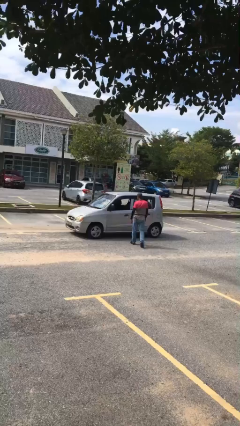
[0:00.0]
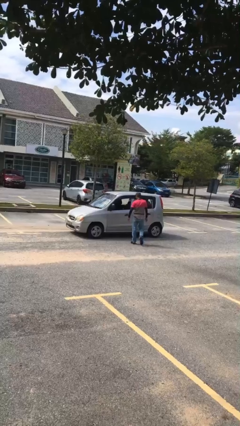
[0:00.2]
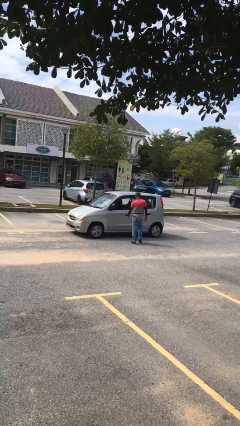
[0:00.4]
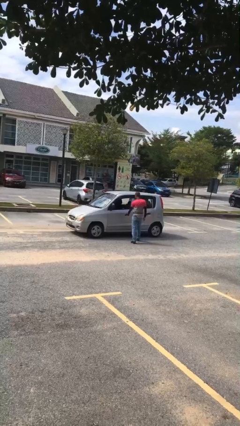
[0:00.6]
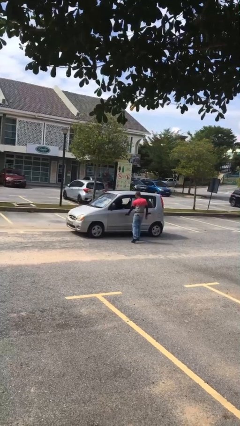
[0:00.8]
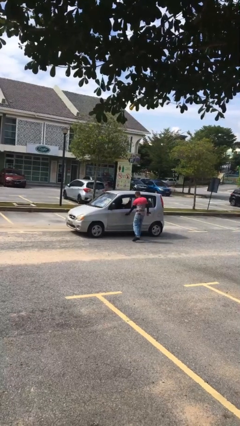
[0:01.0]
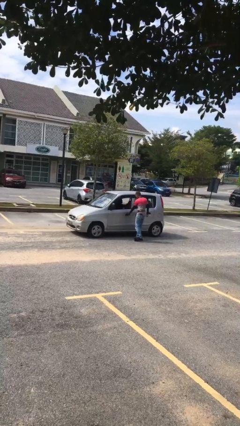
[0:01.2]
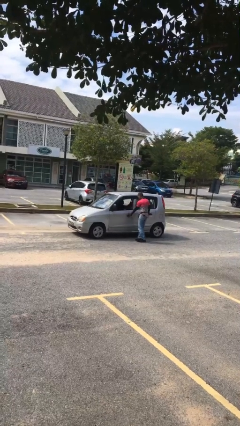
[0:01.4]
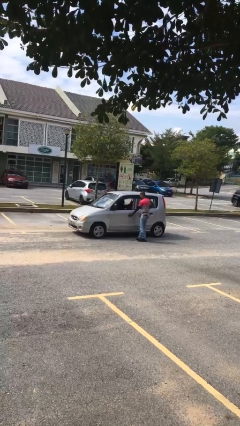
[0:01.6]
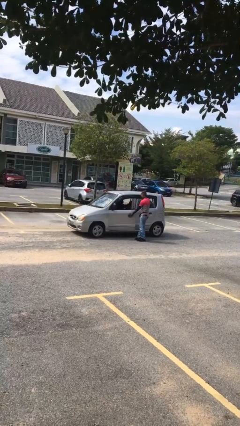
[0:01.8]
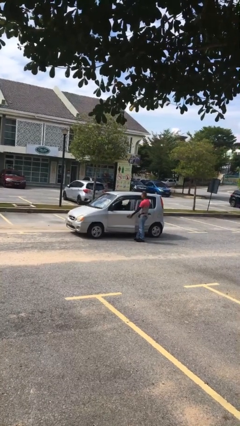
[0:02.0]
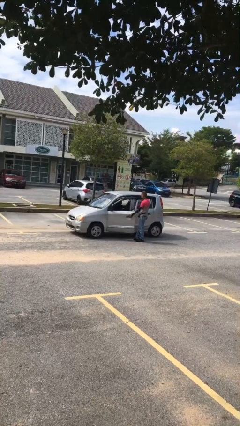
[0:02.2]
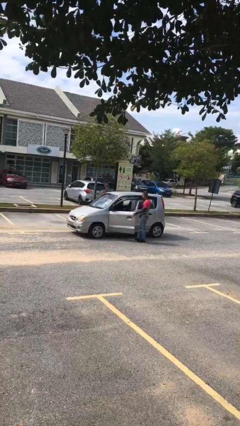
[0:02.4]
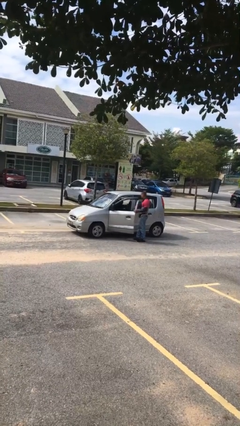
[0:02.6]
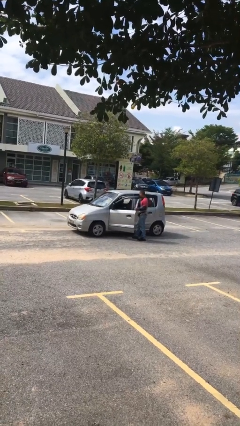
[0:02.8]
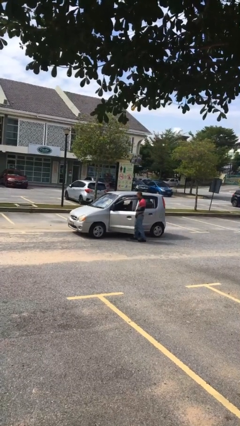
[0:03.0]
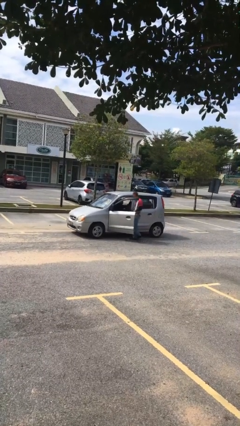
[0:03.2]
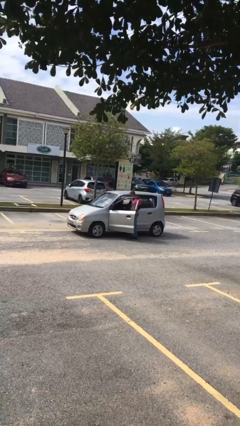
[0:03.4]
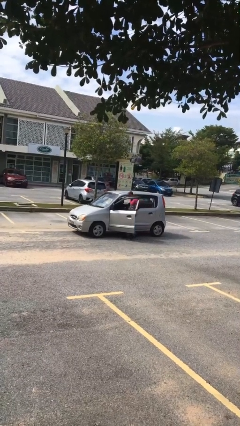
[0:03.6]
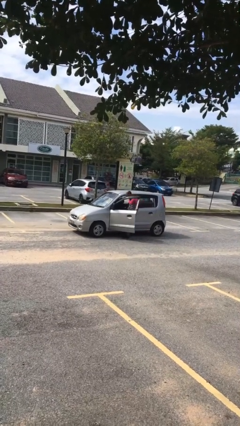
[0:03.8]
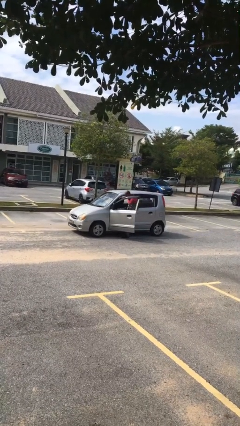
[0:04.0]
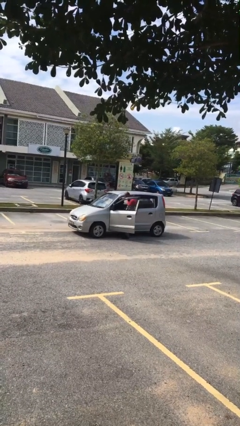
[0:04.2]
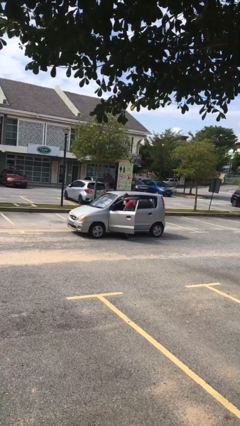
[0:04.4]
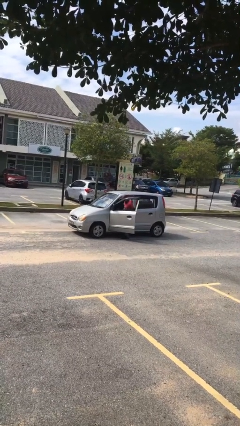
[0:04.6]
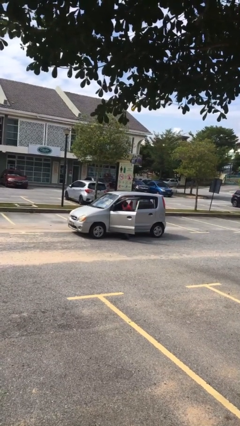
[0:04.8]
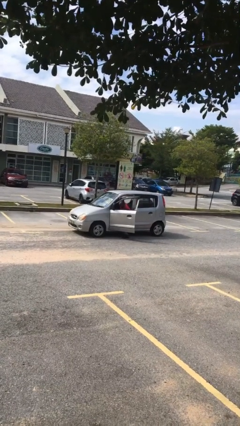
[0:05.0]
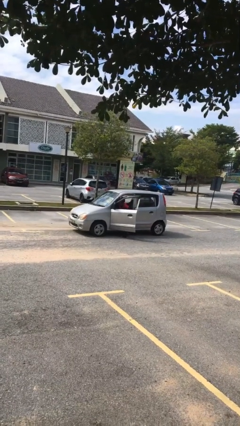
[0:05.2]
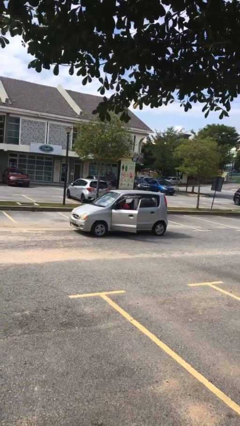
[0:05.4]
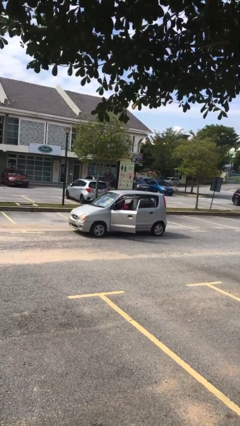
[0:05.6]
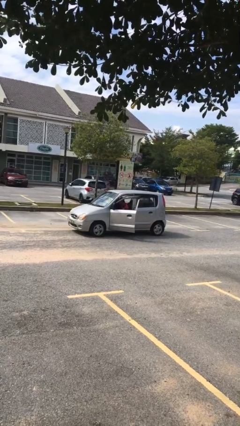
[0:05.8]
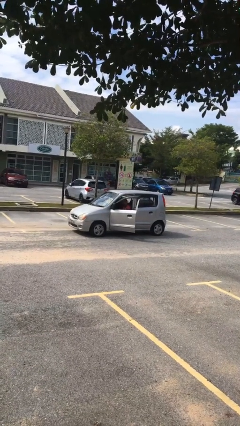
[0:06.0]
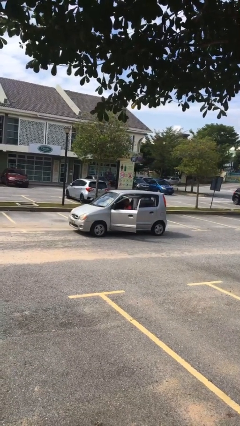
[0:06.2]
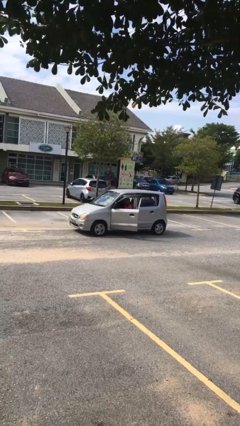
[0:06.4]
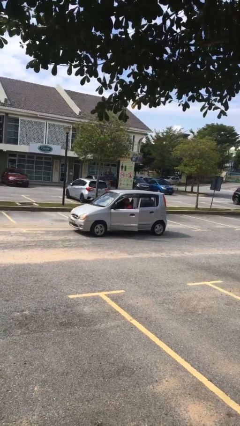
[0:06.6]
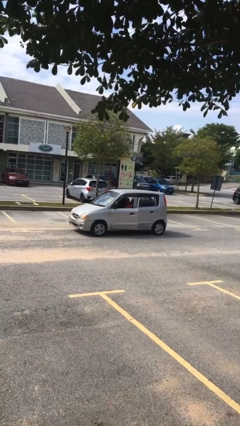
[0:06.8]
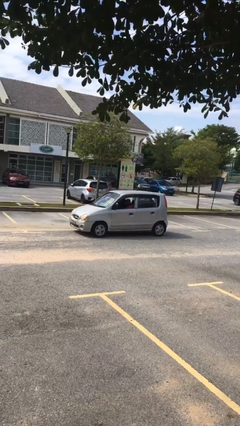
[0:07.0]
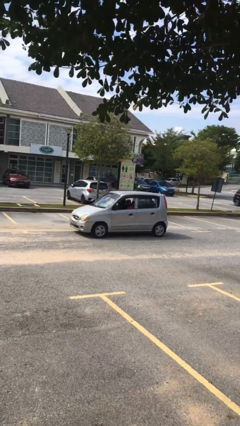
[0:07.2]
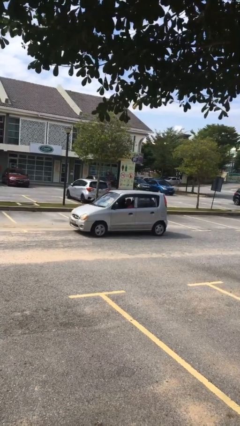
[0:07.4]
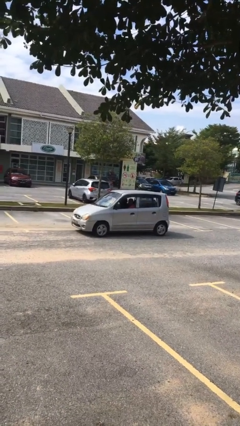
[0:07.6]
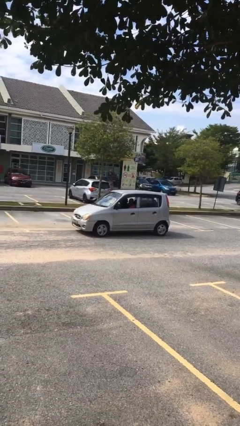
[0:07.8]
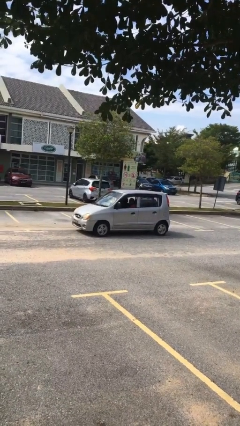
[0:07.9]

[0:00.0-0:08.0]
car picks up person

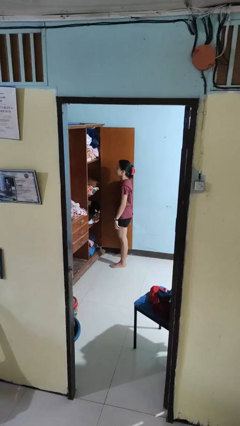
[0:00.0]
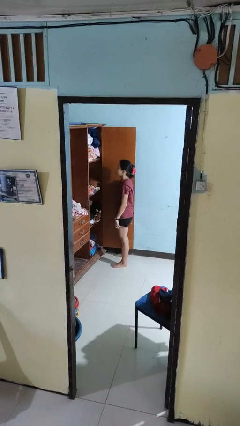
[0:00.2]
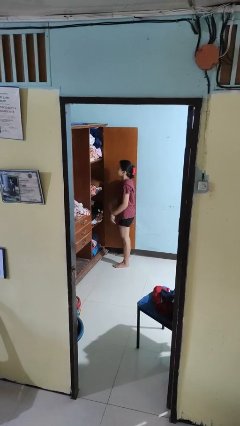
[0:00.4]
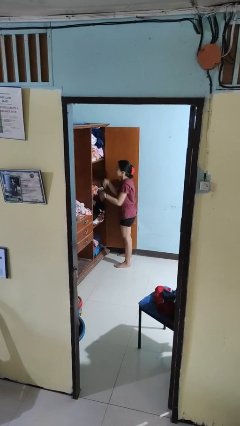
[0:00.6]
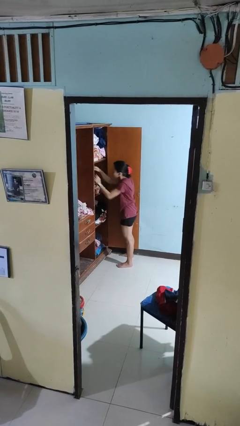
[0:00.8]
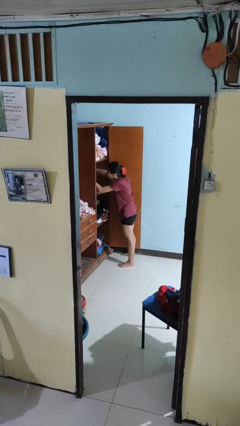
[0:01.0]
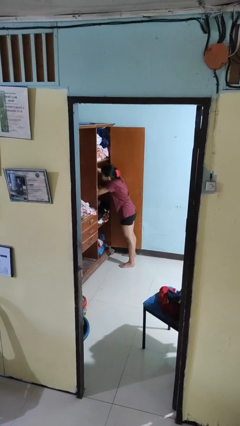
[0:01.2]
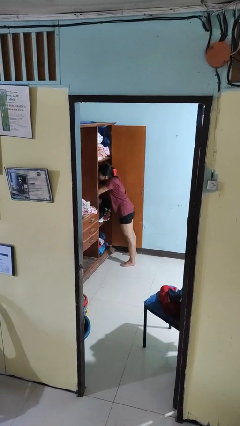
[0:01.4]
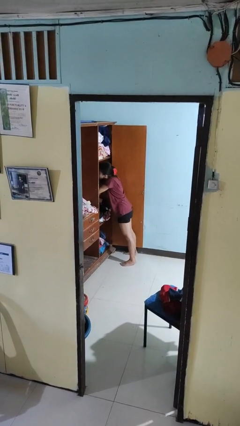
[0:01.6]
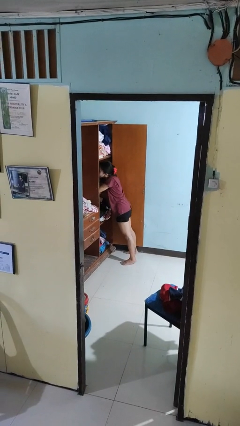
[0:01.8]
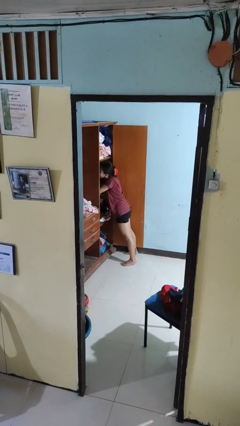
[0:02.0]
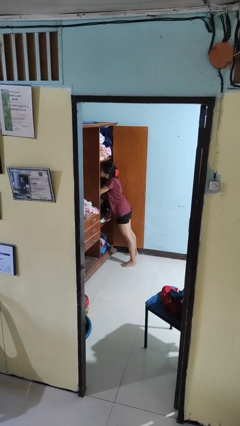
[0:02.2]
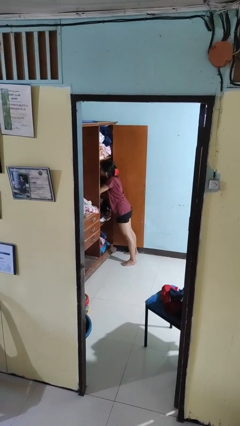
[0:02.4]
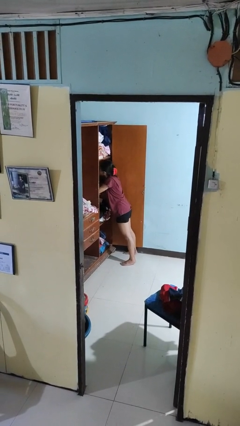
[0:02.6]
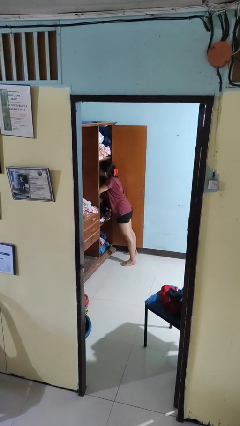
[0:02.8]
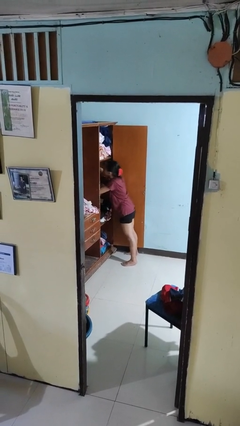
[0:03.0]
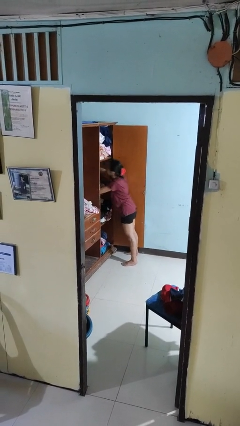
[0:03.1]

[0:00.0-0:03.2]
person searches in cabinet

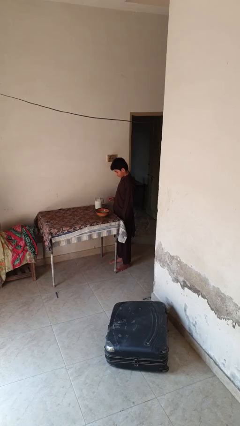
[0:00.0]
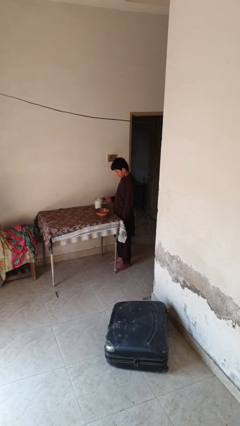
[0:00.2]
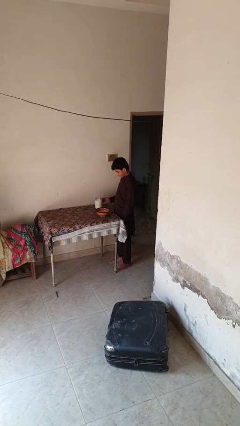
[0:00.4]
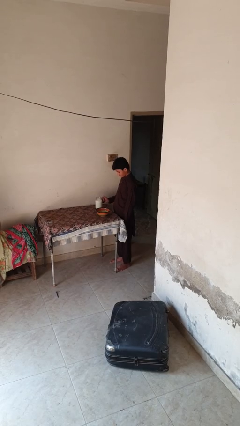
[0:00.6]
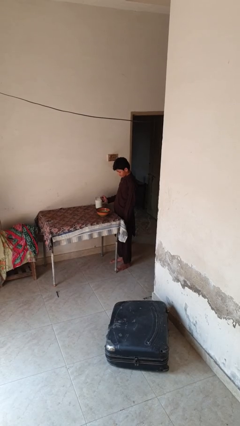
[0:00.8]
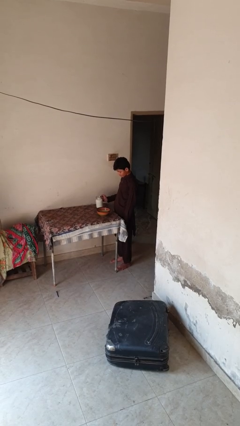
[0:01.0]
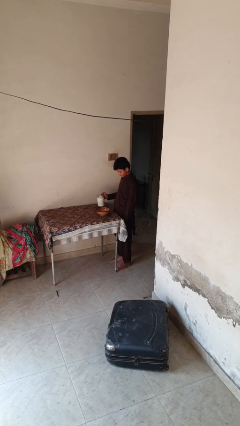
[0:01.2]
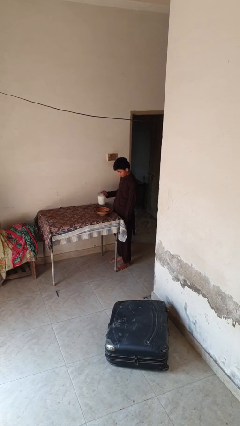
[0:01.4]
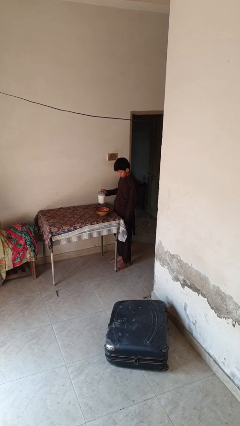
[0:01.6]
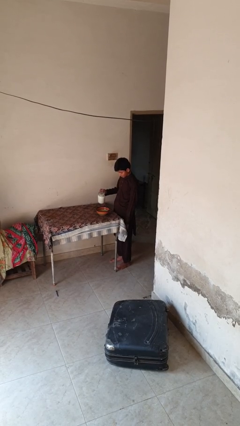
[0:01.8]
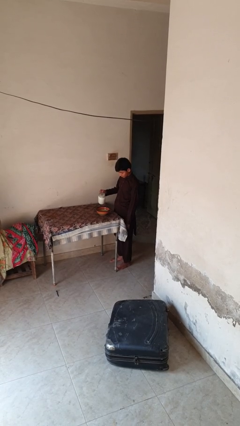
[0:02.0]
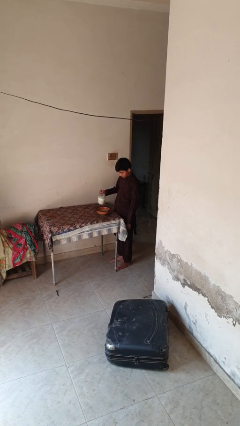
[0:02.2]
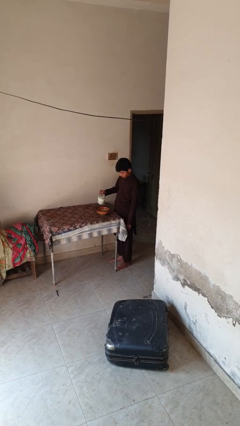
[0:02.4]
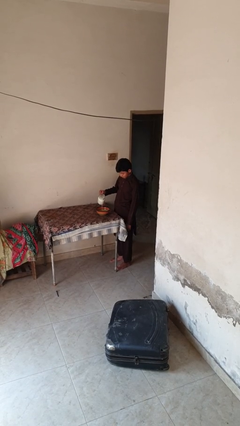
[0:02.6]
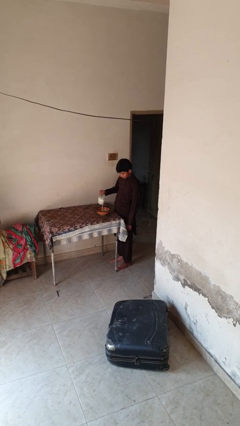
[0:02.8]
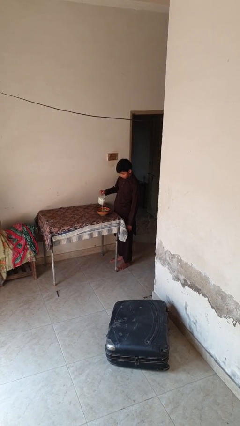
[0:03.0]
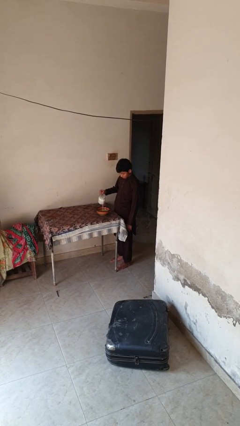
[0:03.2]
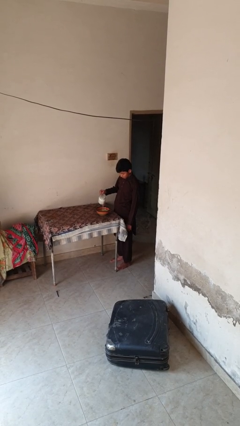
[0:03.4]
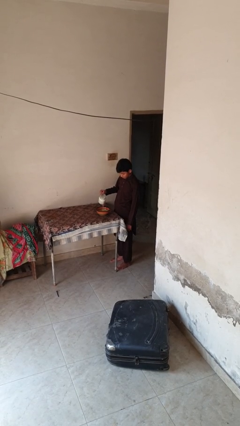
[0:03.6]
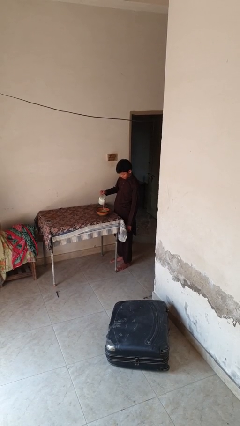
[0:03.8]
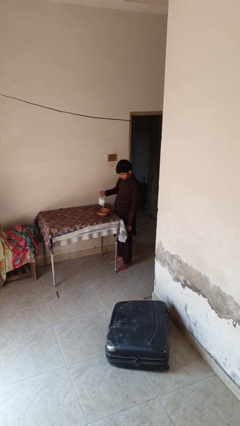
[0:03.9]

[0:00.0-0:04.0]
person pours into bowl

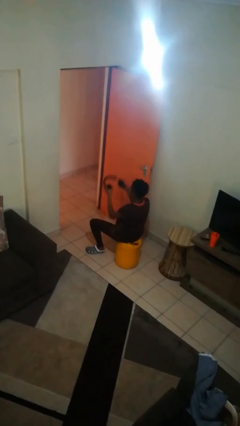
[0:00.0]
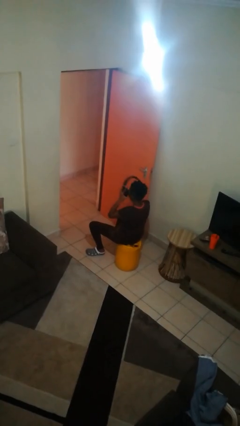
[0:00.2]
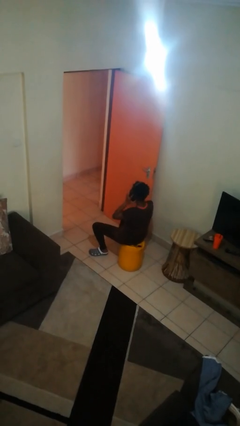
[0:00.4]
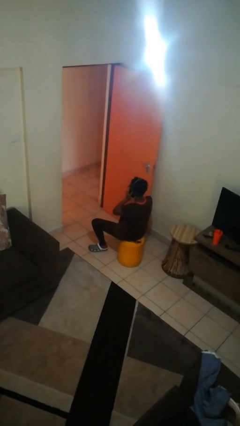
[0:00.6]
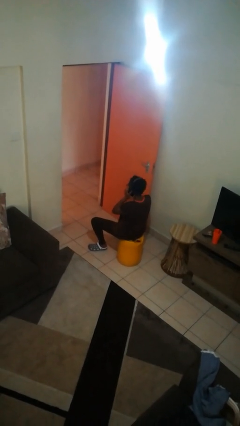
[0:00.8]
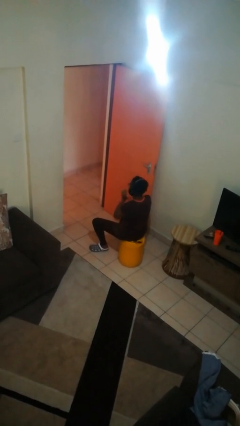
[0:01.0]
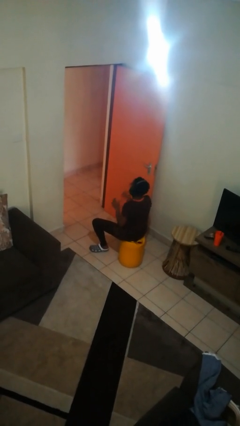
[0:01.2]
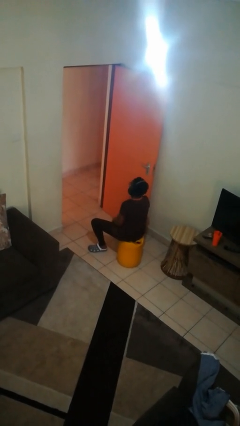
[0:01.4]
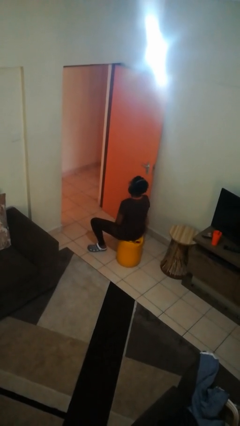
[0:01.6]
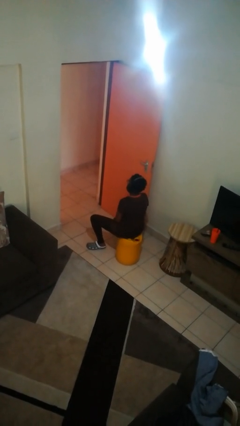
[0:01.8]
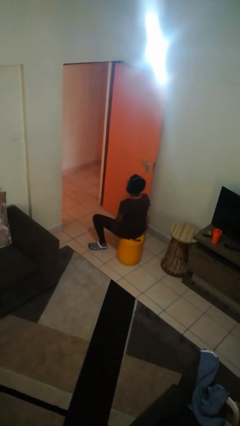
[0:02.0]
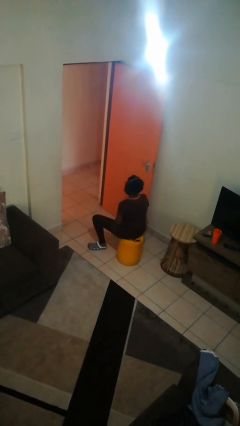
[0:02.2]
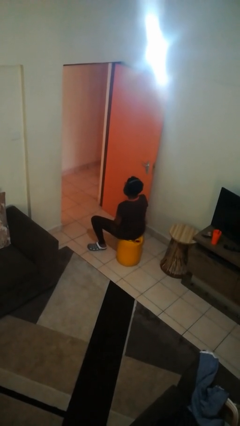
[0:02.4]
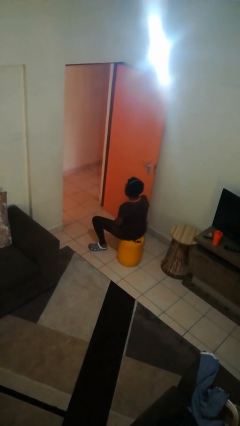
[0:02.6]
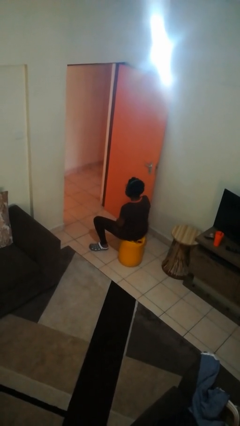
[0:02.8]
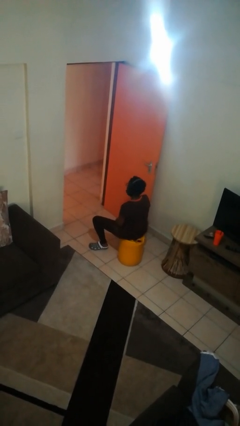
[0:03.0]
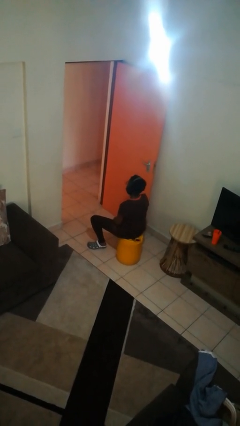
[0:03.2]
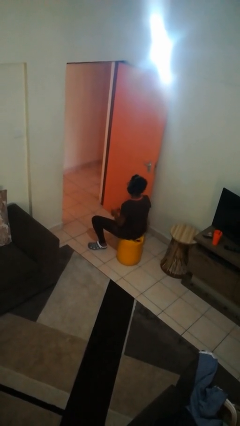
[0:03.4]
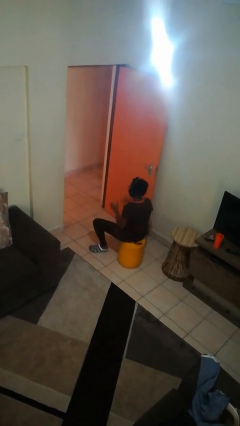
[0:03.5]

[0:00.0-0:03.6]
person puts on headphones
